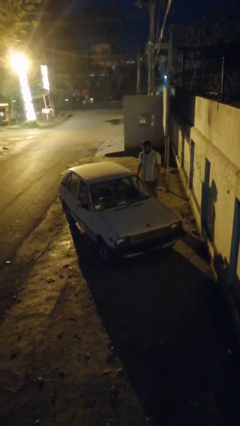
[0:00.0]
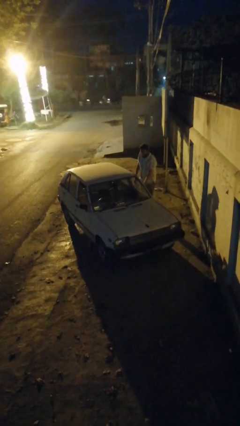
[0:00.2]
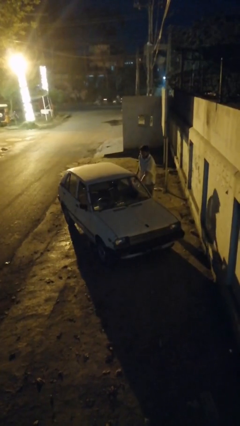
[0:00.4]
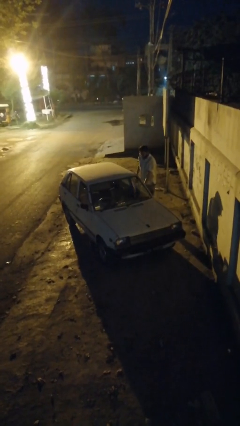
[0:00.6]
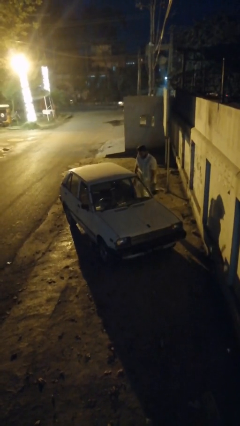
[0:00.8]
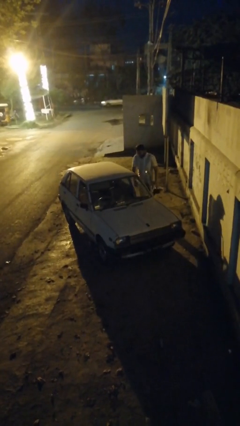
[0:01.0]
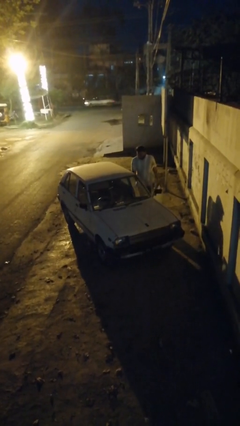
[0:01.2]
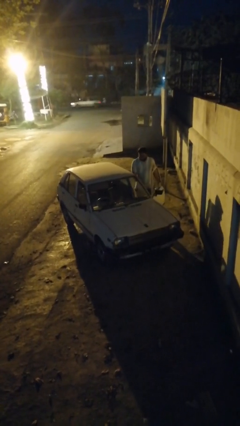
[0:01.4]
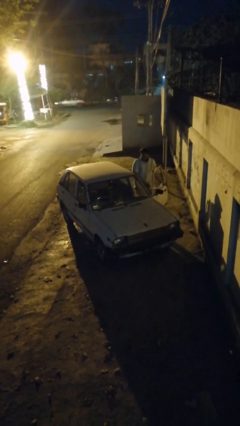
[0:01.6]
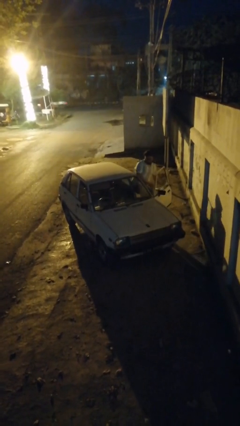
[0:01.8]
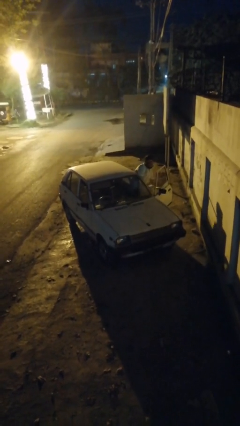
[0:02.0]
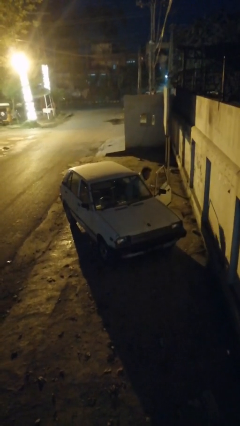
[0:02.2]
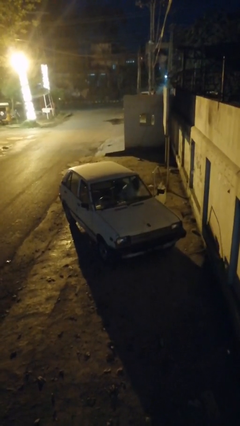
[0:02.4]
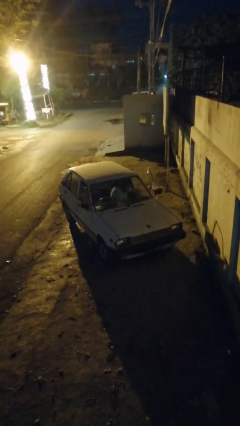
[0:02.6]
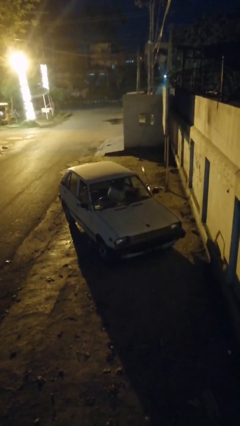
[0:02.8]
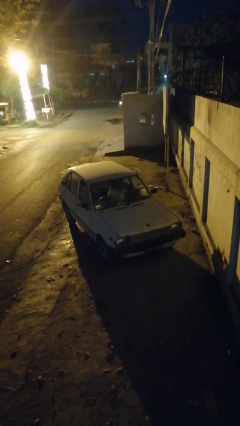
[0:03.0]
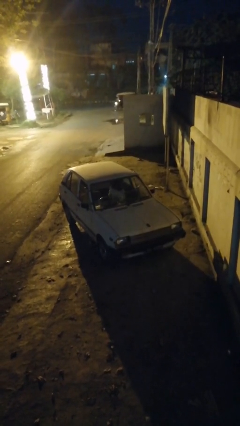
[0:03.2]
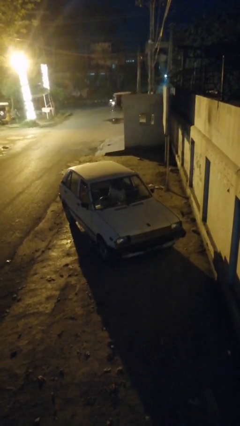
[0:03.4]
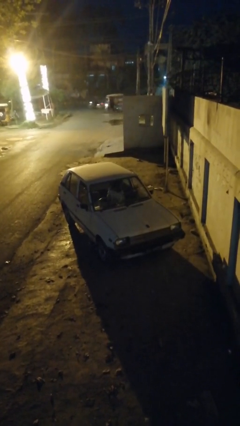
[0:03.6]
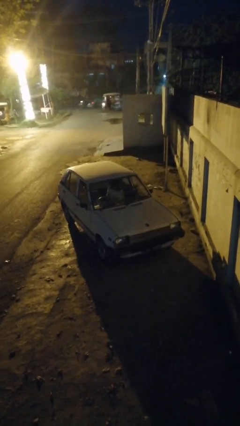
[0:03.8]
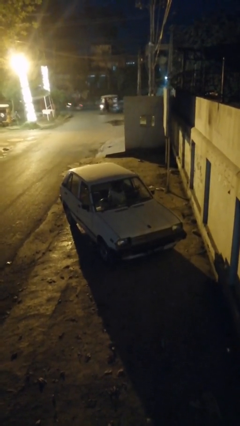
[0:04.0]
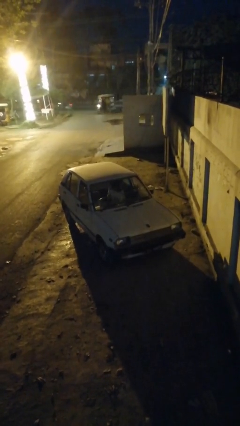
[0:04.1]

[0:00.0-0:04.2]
car picks up person

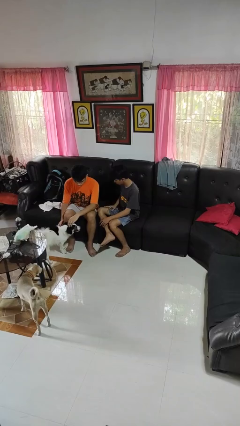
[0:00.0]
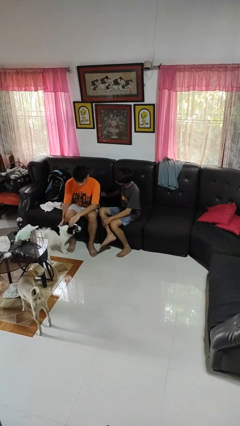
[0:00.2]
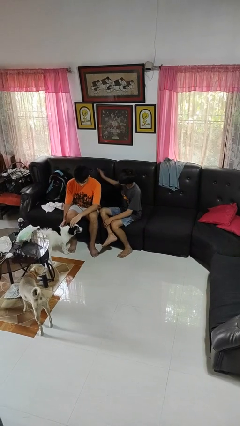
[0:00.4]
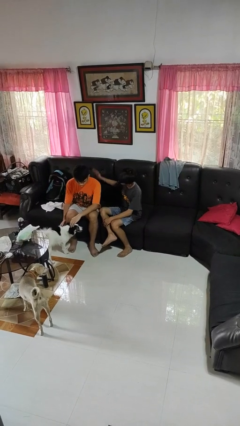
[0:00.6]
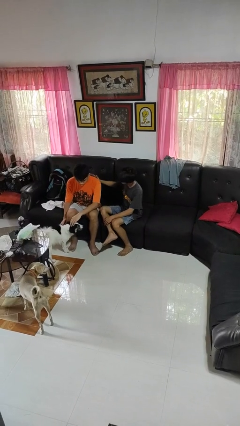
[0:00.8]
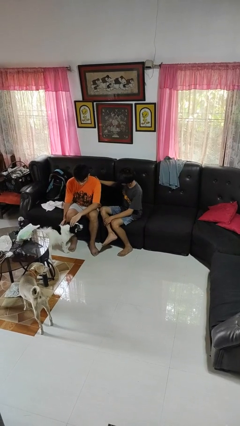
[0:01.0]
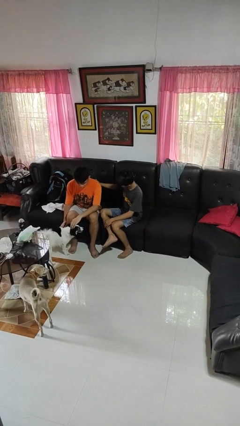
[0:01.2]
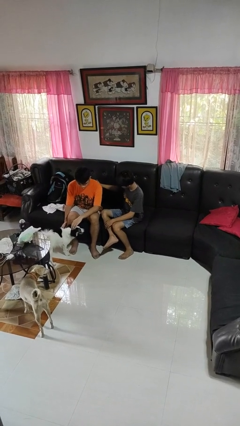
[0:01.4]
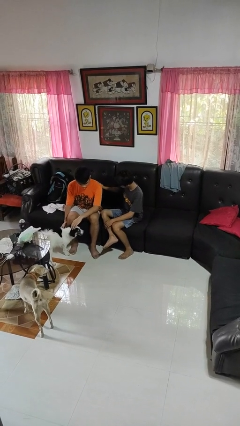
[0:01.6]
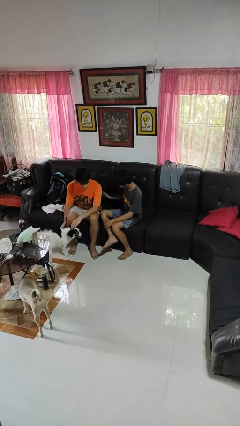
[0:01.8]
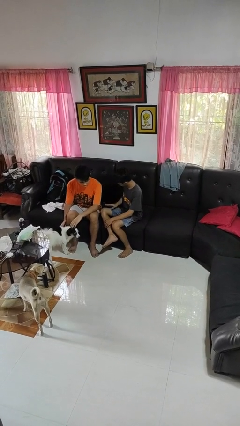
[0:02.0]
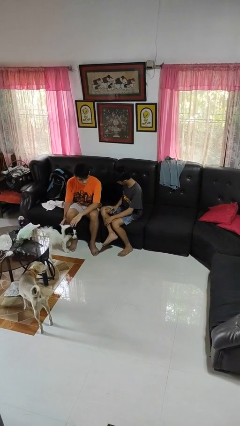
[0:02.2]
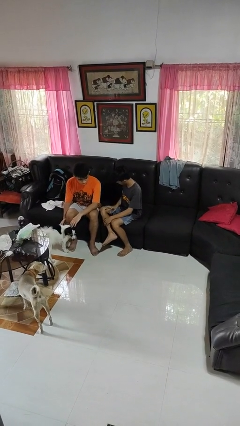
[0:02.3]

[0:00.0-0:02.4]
person touches back of person

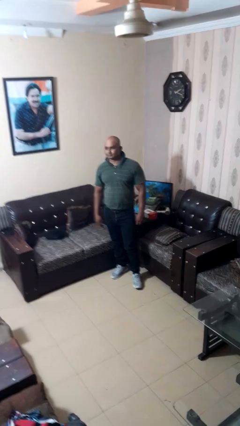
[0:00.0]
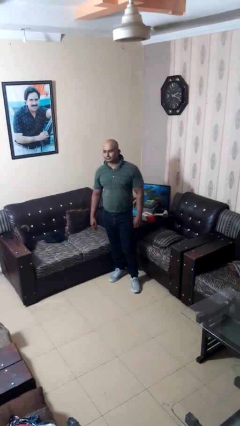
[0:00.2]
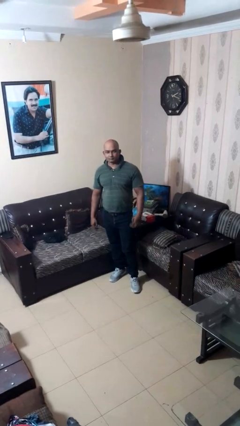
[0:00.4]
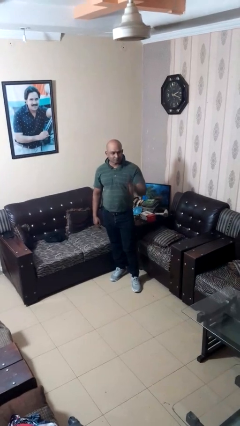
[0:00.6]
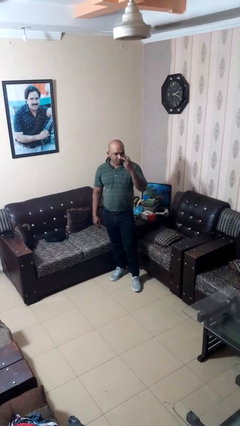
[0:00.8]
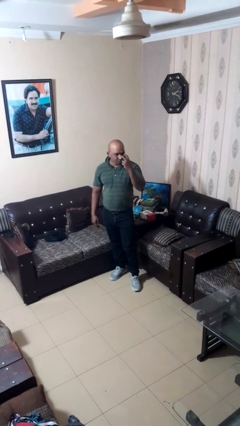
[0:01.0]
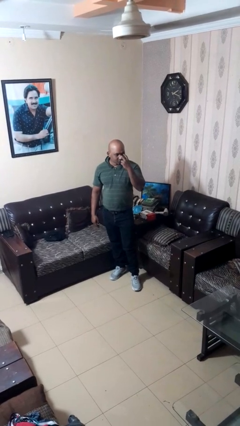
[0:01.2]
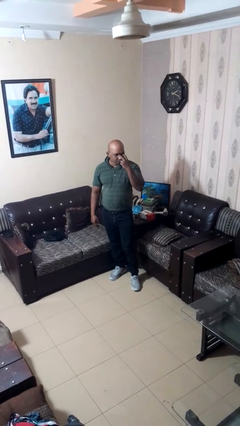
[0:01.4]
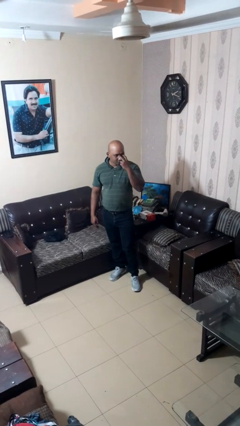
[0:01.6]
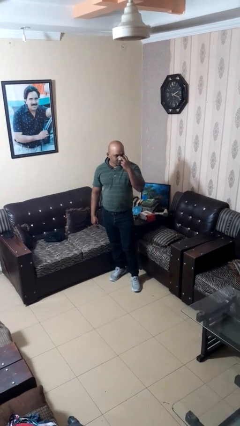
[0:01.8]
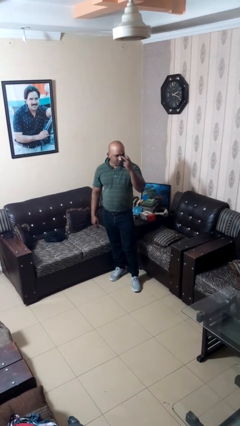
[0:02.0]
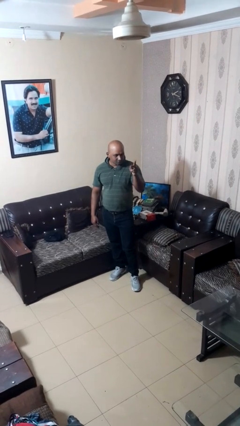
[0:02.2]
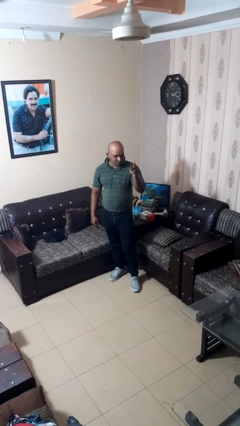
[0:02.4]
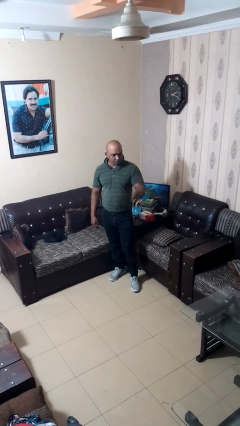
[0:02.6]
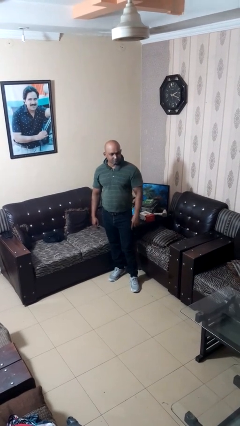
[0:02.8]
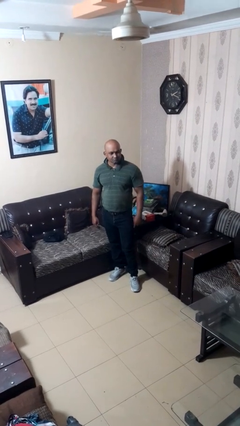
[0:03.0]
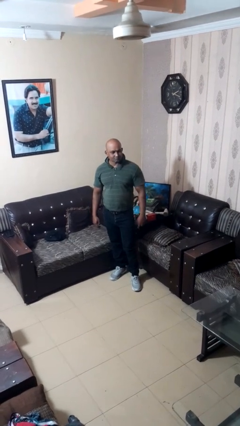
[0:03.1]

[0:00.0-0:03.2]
person gestures watch closely

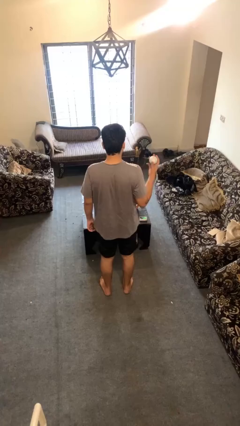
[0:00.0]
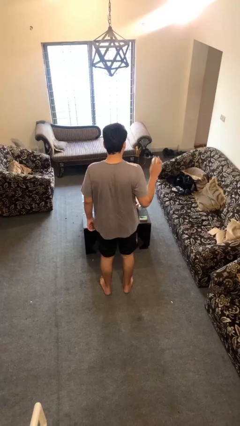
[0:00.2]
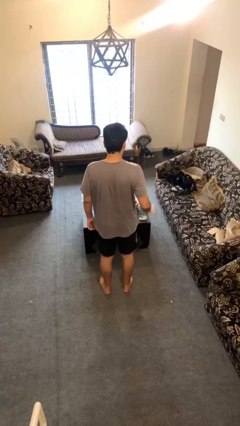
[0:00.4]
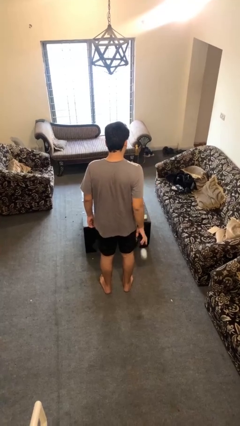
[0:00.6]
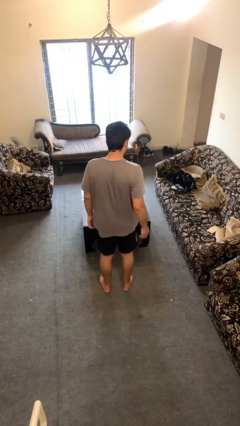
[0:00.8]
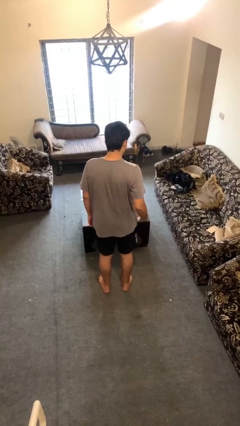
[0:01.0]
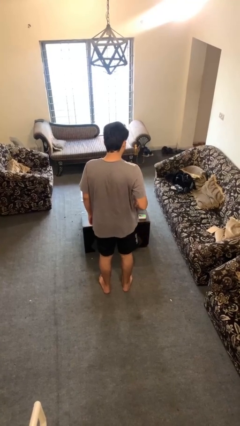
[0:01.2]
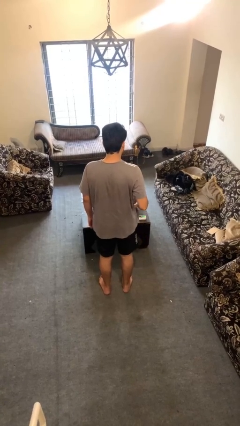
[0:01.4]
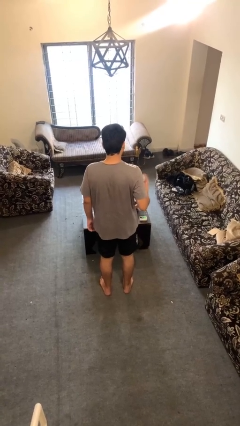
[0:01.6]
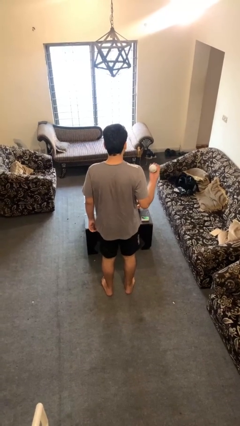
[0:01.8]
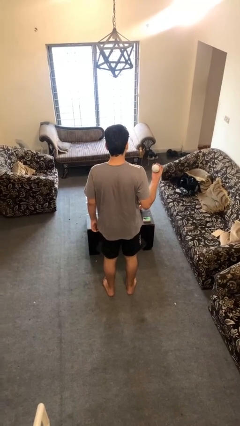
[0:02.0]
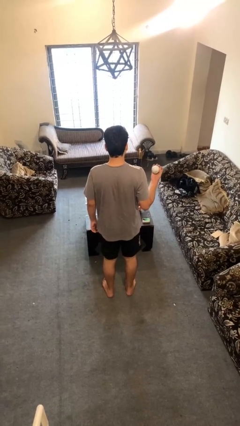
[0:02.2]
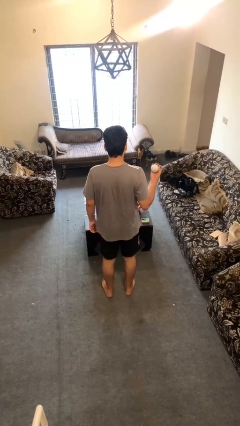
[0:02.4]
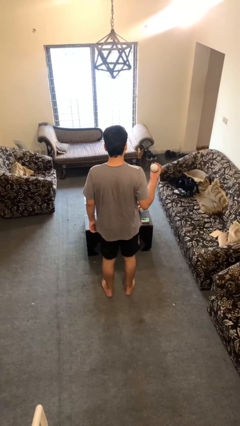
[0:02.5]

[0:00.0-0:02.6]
person bounces ball on floor

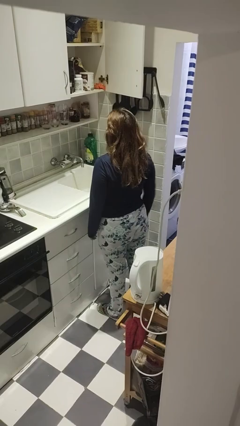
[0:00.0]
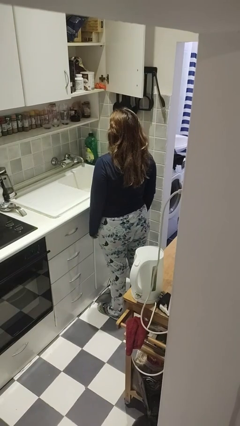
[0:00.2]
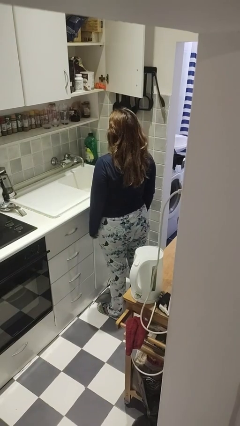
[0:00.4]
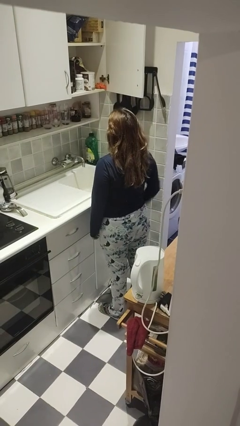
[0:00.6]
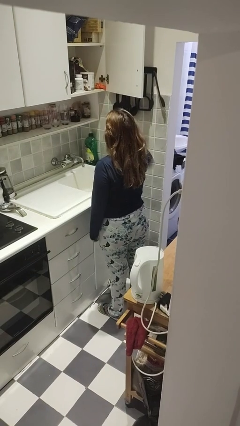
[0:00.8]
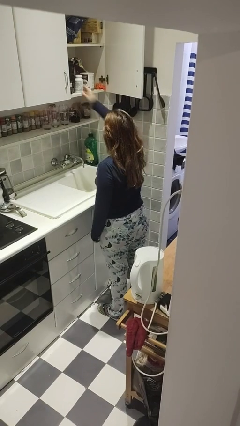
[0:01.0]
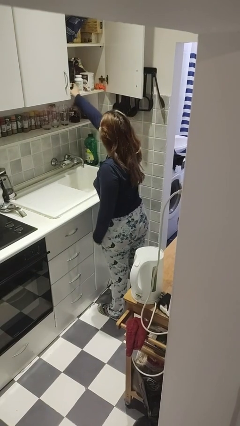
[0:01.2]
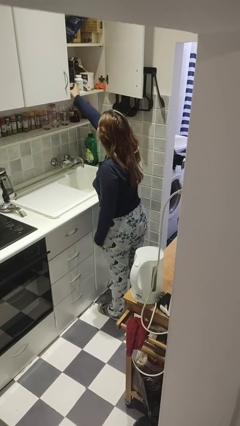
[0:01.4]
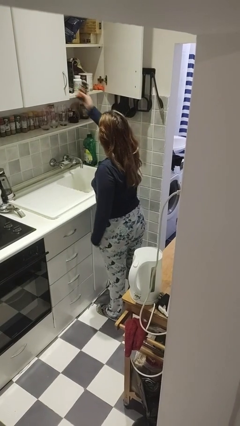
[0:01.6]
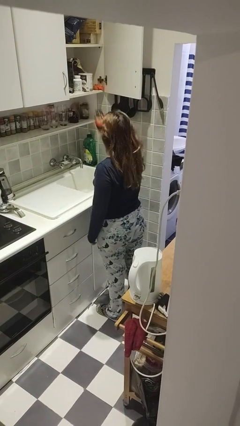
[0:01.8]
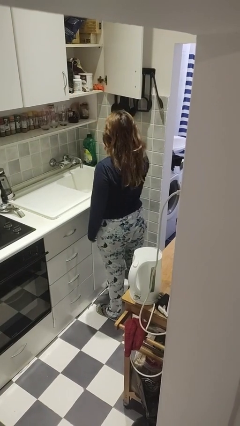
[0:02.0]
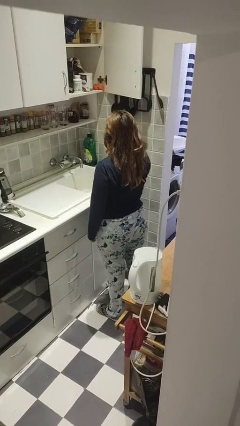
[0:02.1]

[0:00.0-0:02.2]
person takes object from cabinet

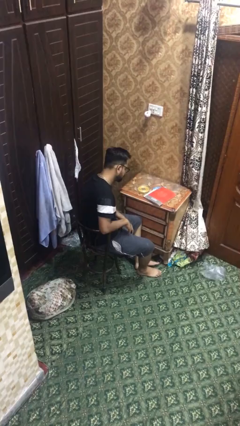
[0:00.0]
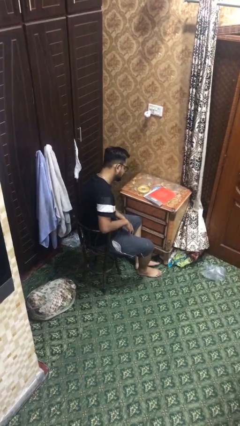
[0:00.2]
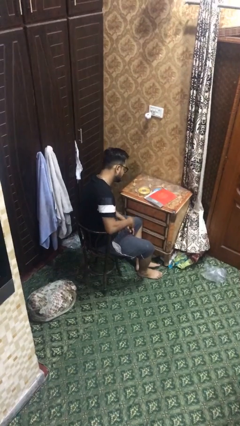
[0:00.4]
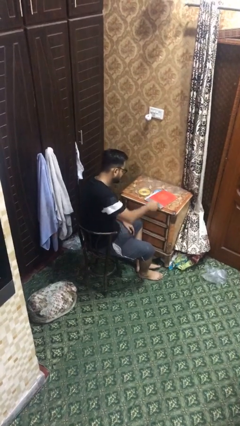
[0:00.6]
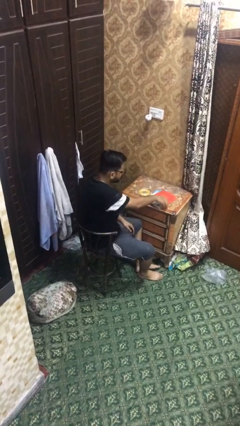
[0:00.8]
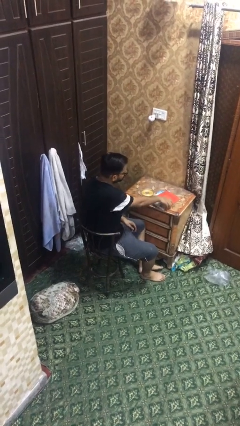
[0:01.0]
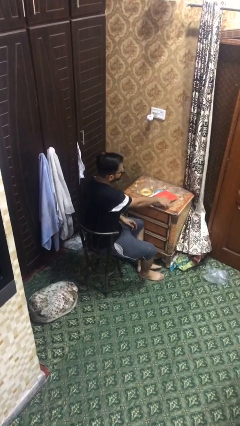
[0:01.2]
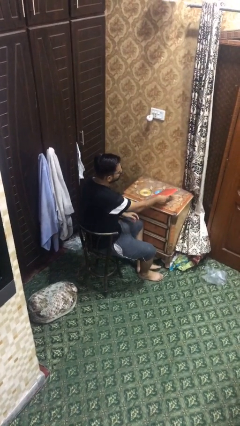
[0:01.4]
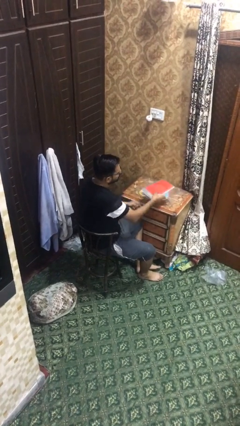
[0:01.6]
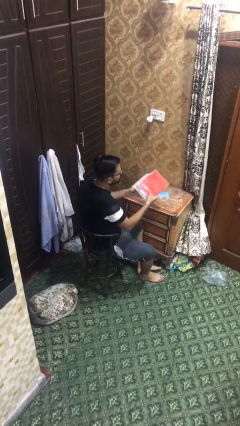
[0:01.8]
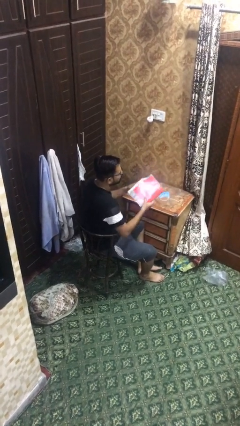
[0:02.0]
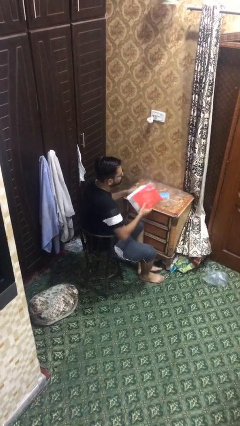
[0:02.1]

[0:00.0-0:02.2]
person picks up object from table

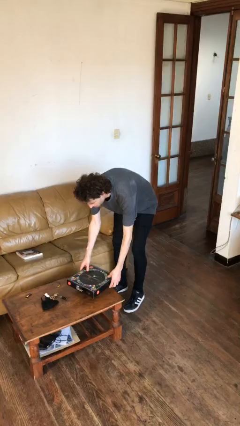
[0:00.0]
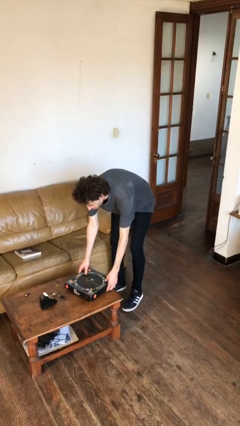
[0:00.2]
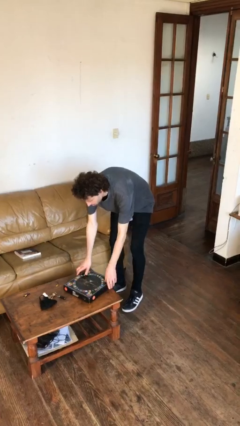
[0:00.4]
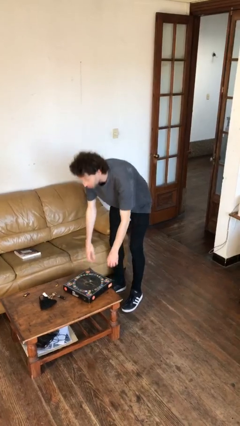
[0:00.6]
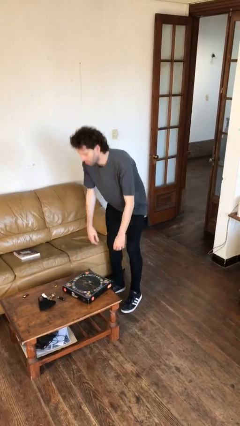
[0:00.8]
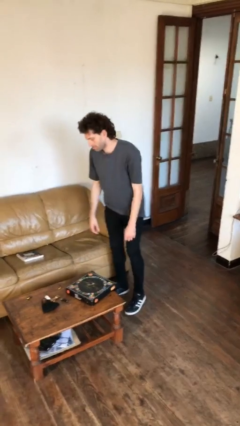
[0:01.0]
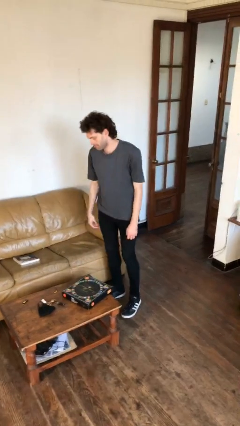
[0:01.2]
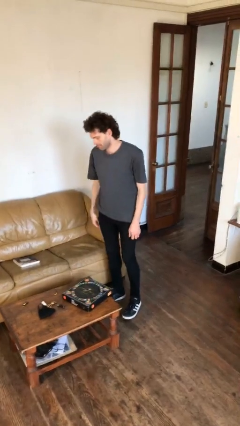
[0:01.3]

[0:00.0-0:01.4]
person puts down object on table
